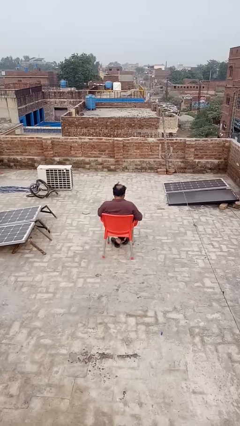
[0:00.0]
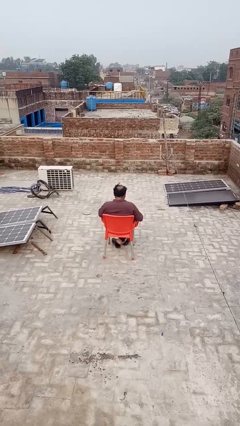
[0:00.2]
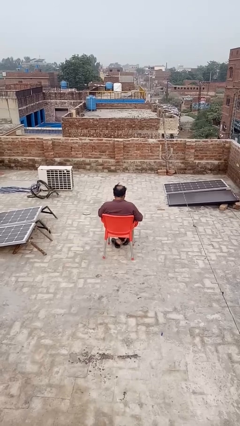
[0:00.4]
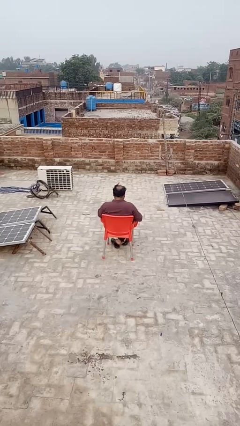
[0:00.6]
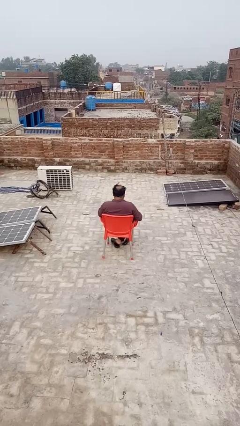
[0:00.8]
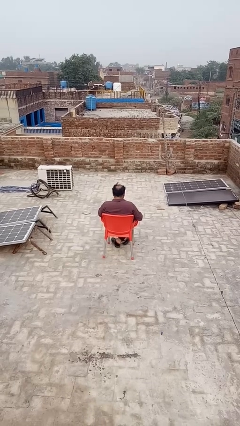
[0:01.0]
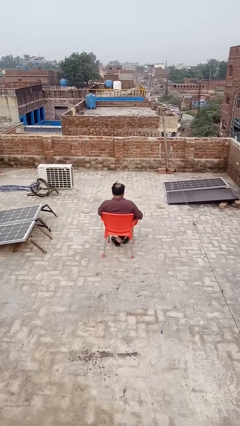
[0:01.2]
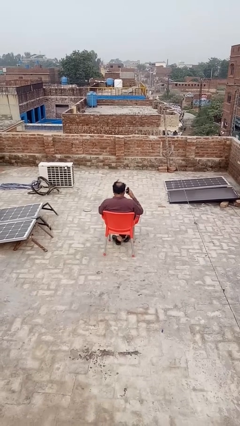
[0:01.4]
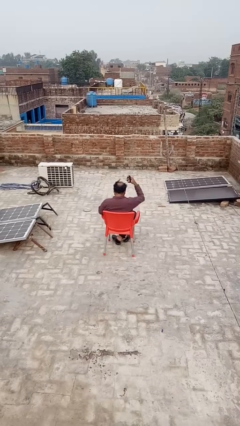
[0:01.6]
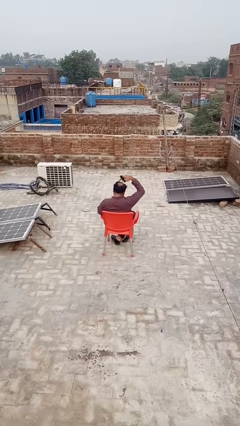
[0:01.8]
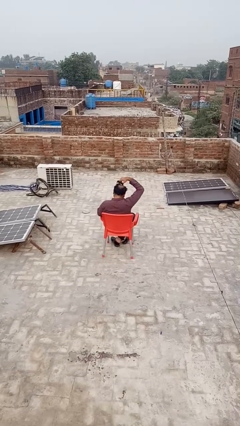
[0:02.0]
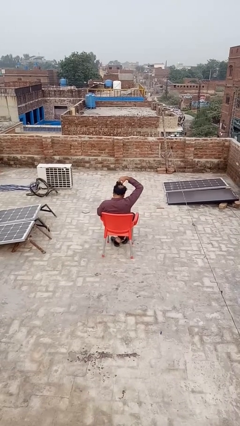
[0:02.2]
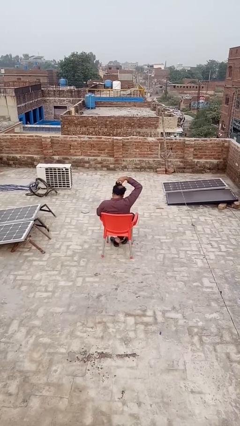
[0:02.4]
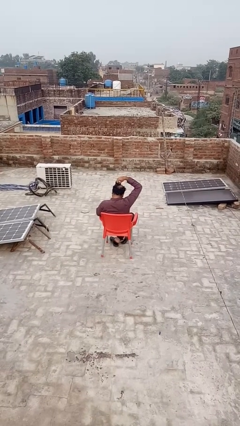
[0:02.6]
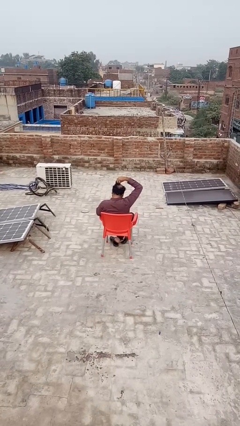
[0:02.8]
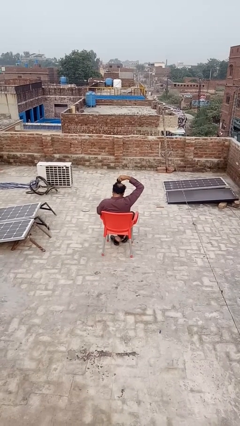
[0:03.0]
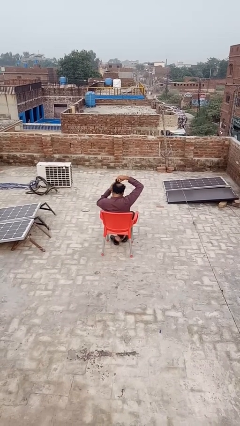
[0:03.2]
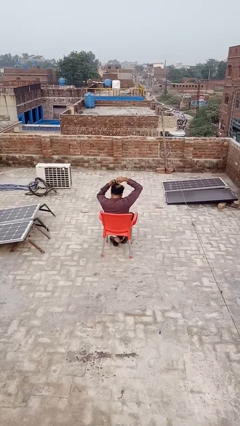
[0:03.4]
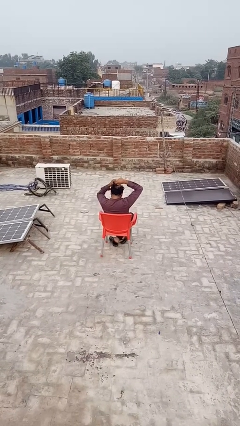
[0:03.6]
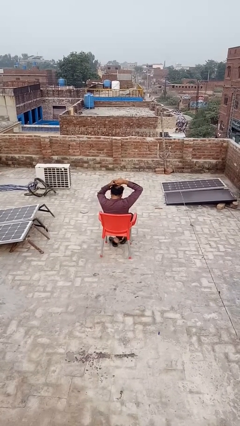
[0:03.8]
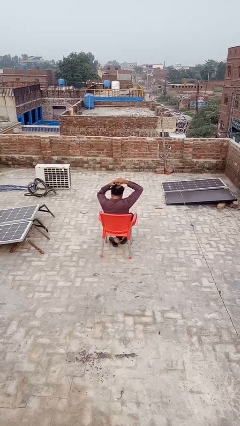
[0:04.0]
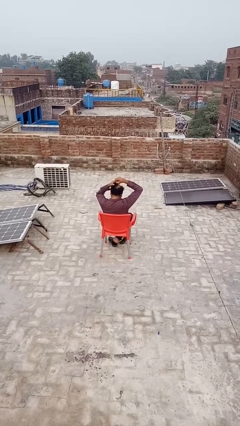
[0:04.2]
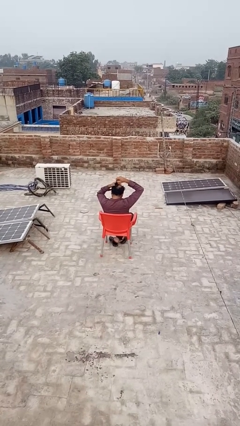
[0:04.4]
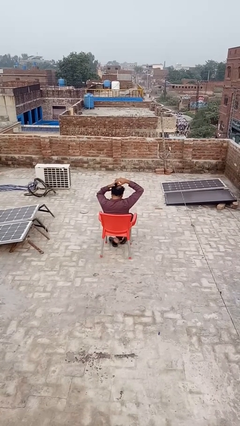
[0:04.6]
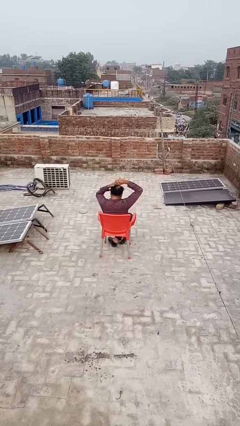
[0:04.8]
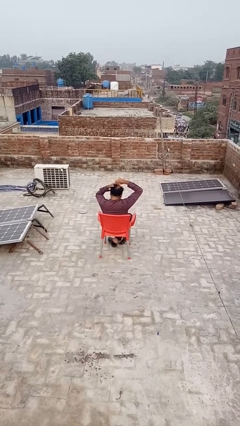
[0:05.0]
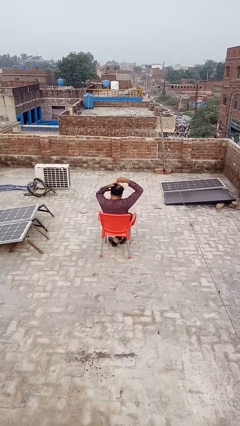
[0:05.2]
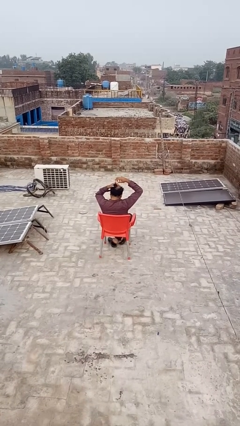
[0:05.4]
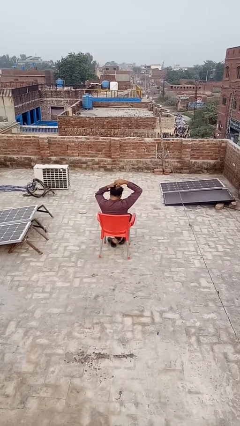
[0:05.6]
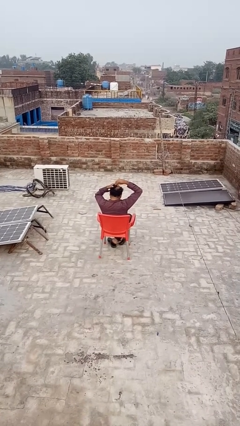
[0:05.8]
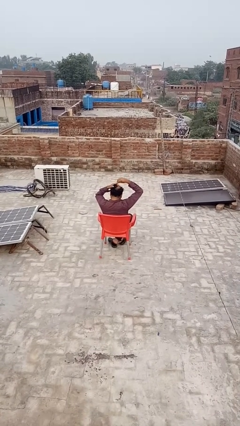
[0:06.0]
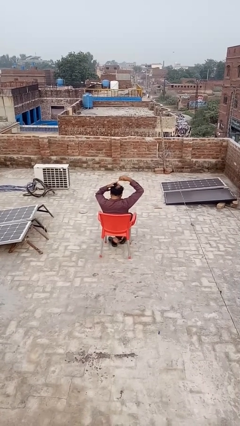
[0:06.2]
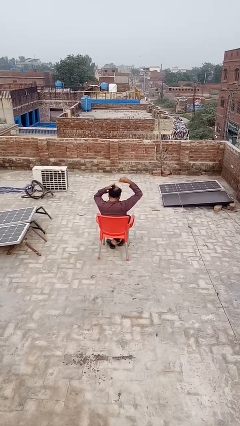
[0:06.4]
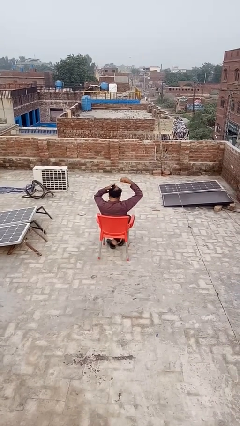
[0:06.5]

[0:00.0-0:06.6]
person puts hair in ponytail

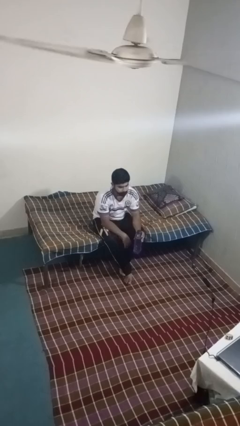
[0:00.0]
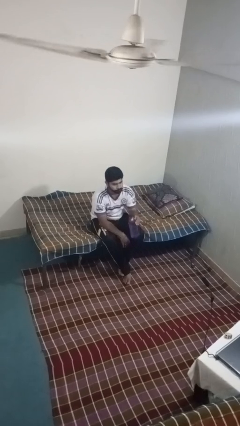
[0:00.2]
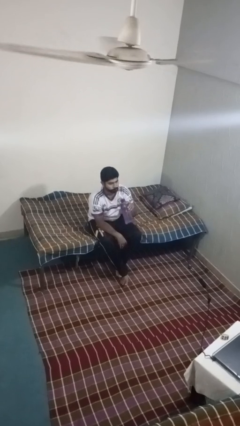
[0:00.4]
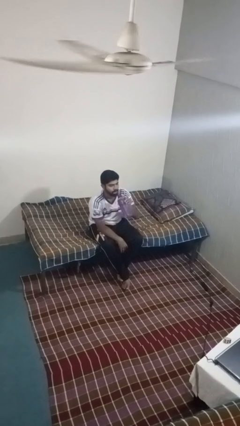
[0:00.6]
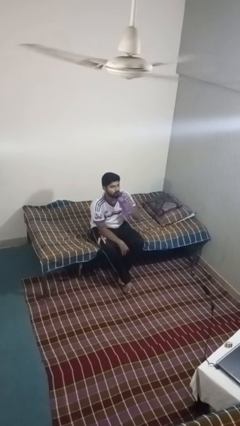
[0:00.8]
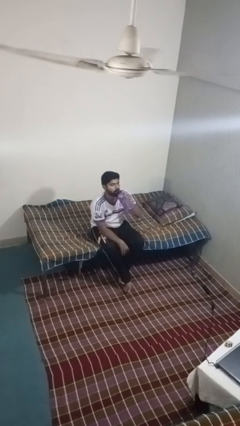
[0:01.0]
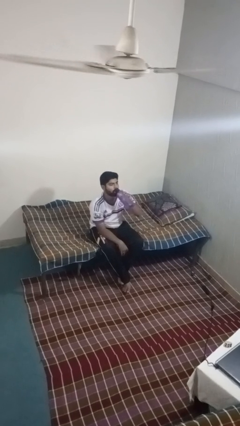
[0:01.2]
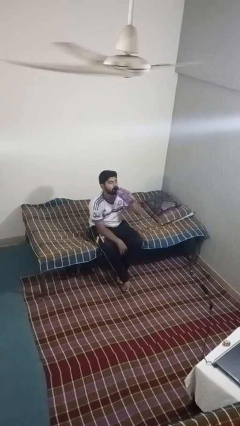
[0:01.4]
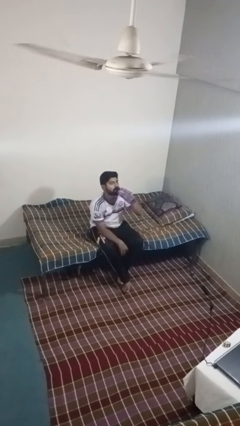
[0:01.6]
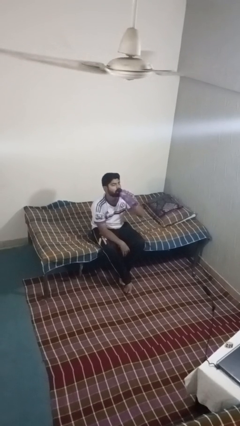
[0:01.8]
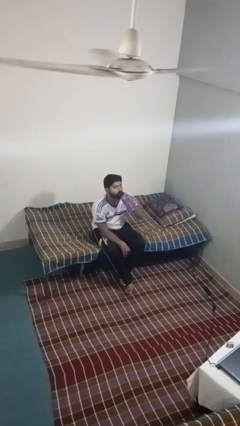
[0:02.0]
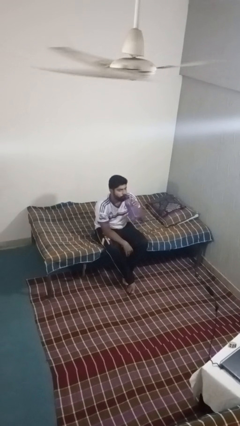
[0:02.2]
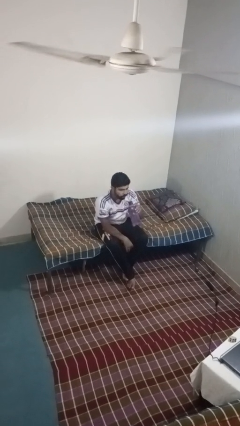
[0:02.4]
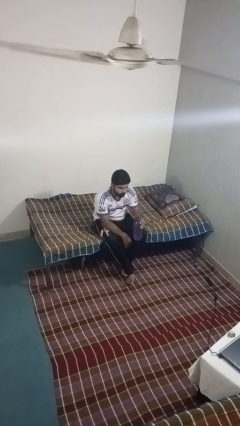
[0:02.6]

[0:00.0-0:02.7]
person drinks from bottle

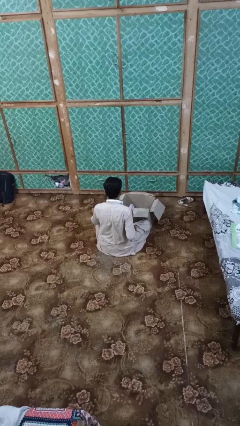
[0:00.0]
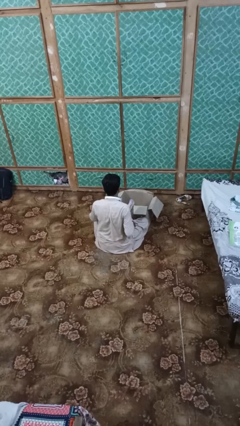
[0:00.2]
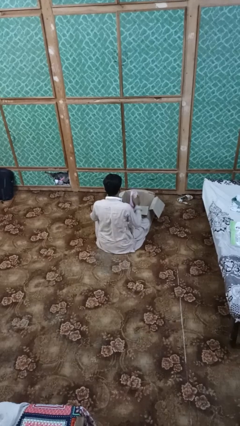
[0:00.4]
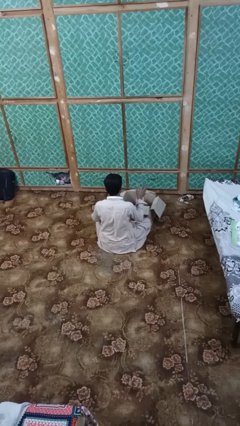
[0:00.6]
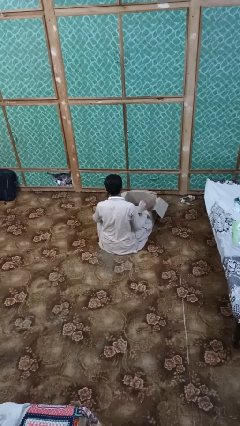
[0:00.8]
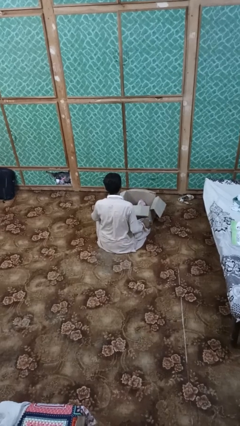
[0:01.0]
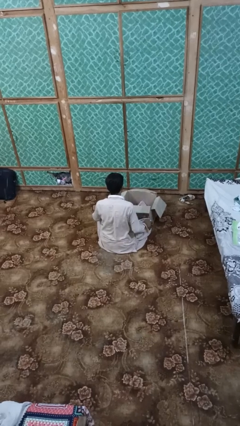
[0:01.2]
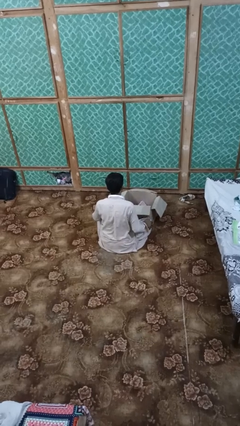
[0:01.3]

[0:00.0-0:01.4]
person puts object into box

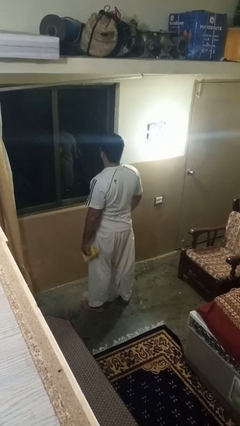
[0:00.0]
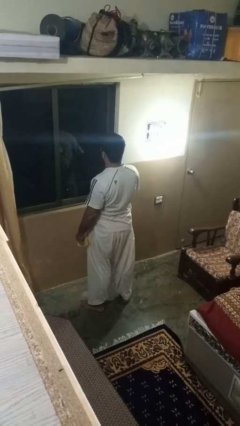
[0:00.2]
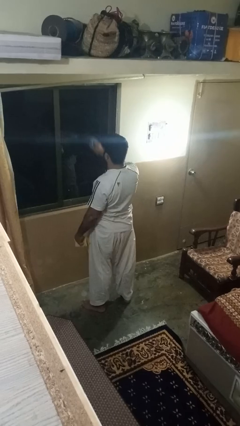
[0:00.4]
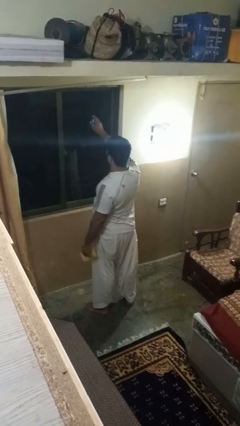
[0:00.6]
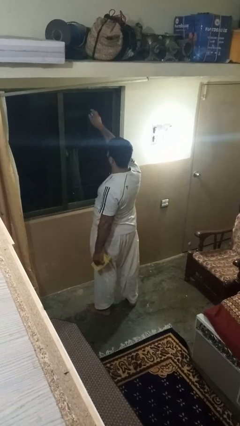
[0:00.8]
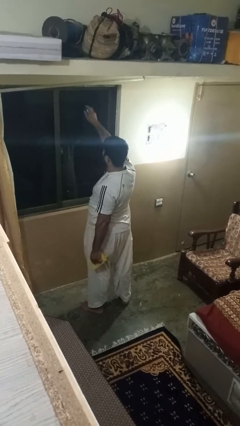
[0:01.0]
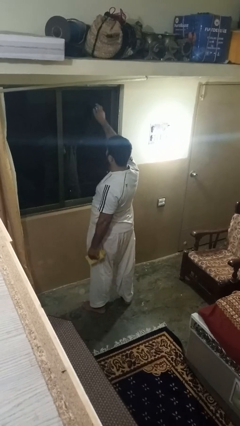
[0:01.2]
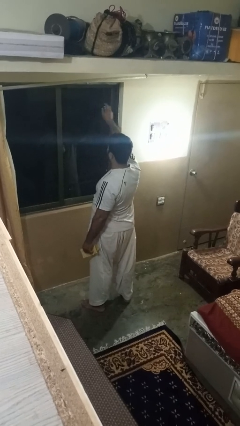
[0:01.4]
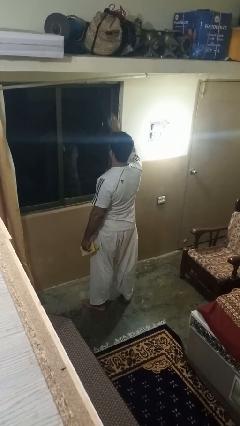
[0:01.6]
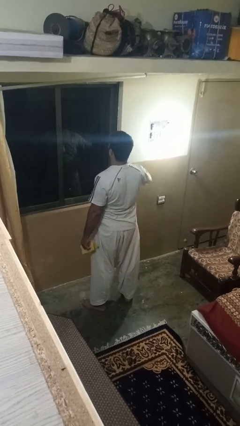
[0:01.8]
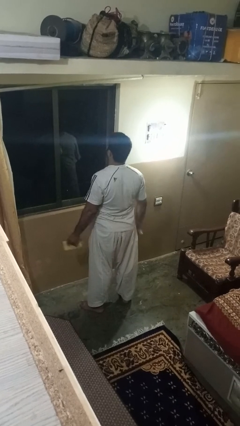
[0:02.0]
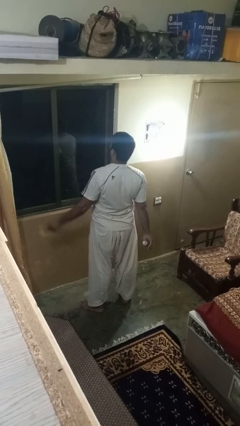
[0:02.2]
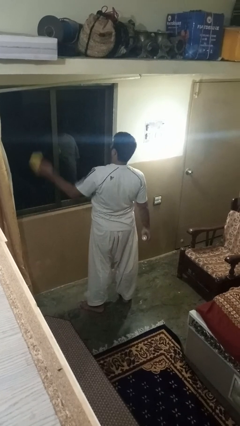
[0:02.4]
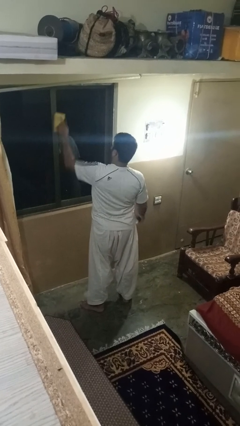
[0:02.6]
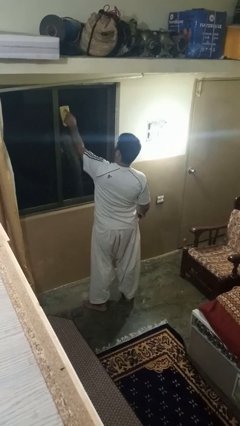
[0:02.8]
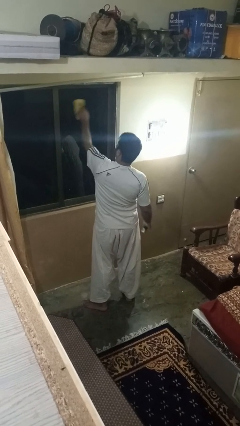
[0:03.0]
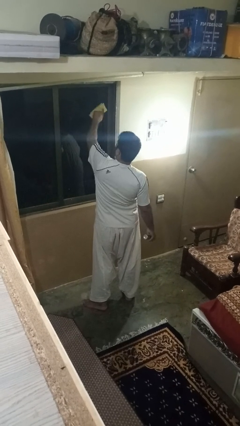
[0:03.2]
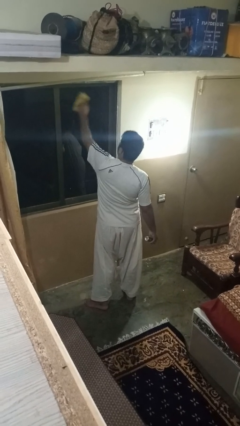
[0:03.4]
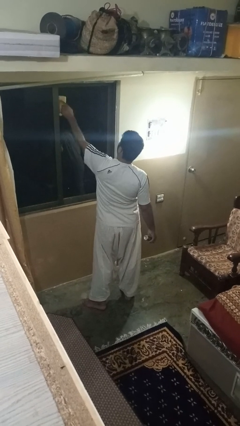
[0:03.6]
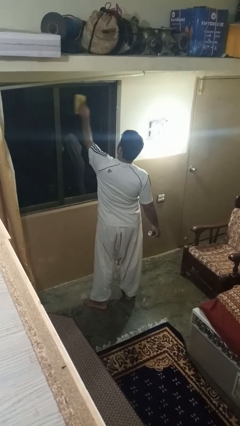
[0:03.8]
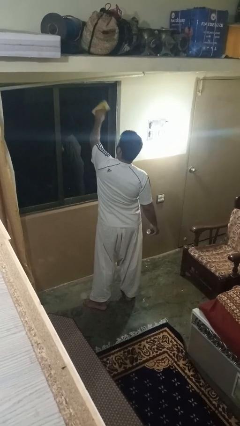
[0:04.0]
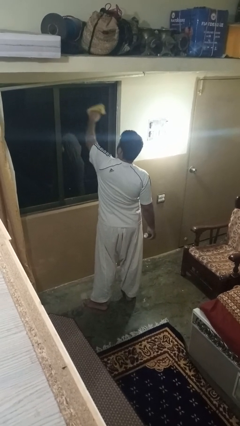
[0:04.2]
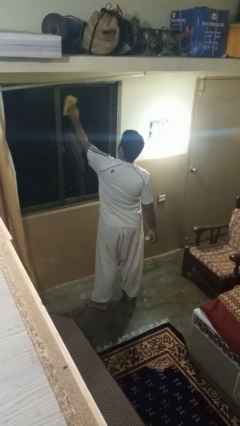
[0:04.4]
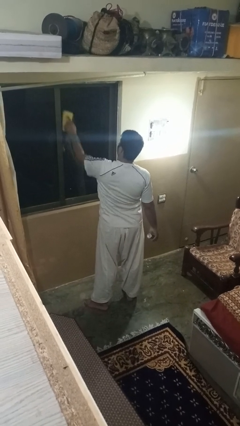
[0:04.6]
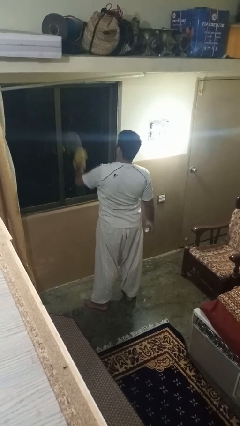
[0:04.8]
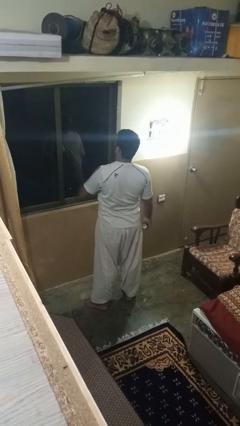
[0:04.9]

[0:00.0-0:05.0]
person sprays from bottle

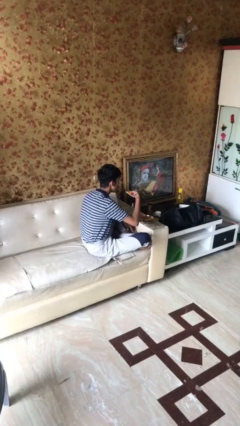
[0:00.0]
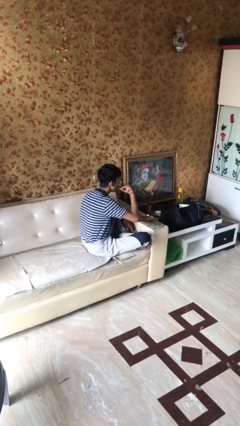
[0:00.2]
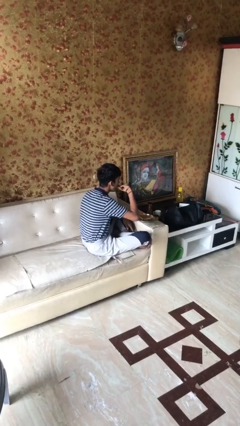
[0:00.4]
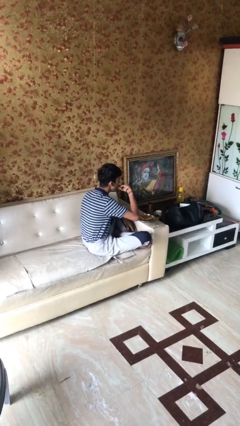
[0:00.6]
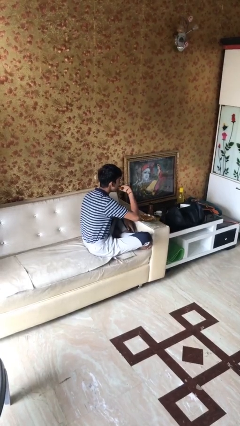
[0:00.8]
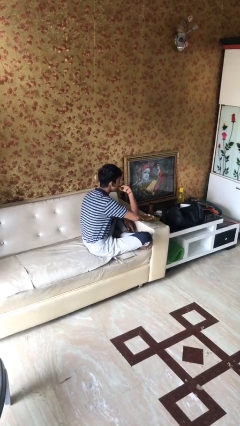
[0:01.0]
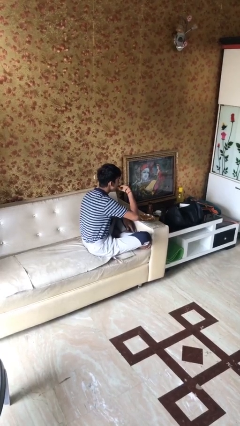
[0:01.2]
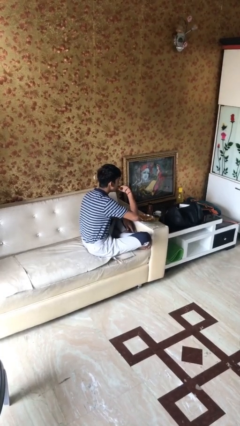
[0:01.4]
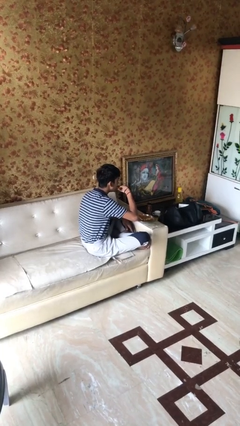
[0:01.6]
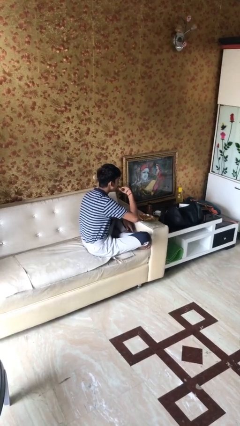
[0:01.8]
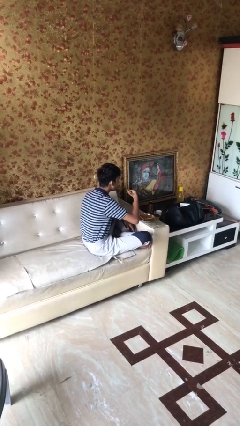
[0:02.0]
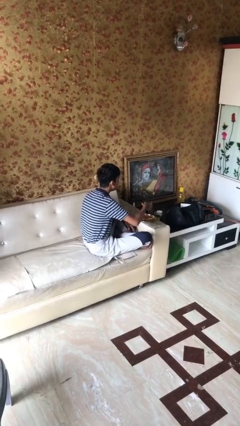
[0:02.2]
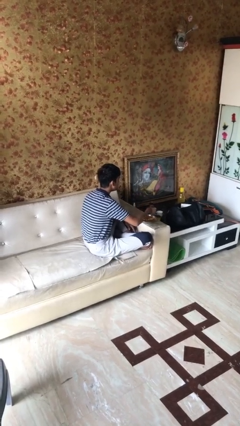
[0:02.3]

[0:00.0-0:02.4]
person eats with hands
